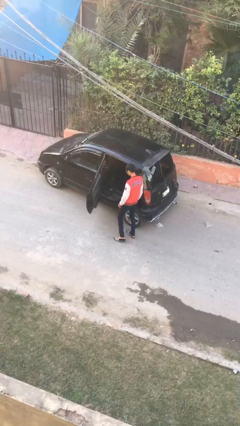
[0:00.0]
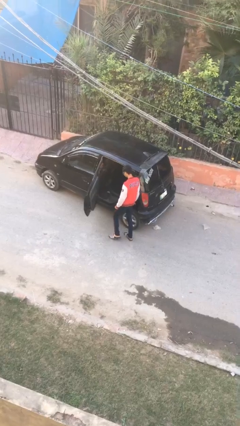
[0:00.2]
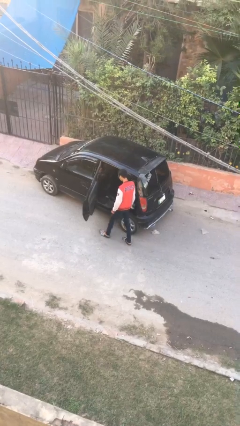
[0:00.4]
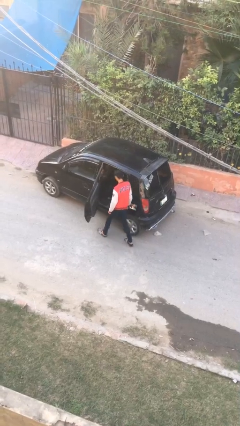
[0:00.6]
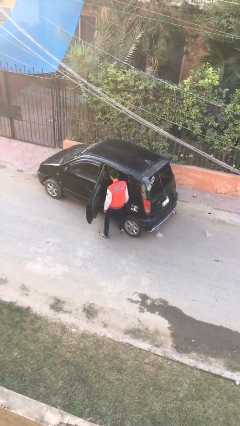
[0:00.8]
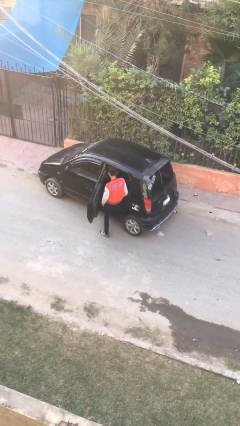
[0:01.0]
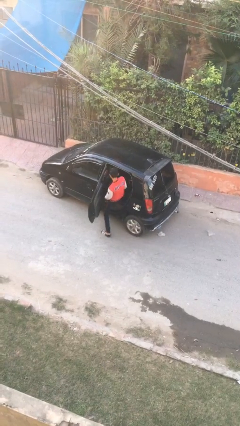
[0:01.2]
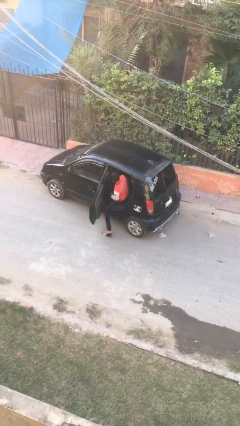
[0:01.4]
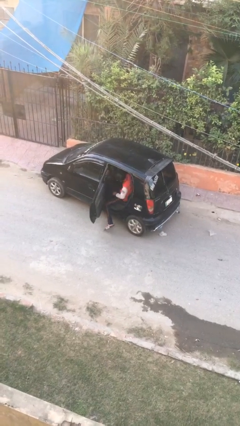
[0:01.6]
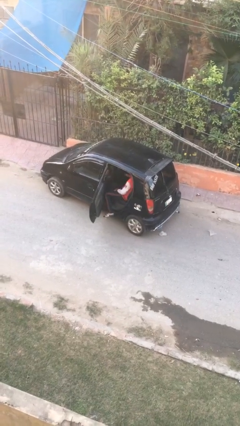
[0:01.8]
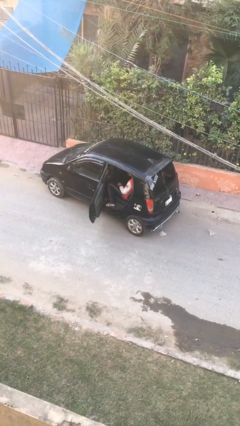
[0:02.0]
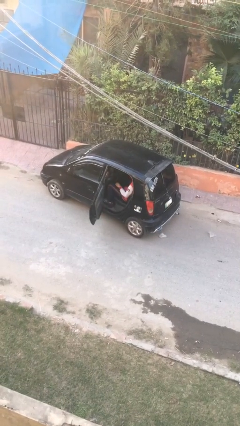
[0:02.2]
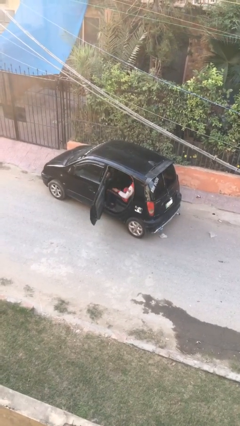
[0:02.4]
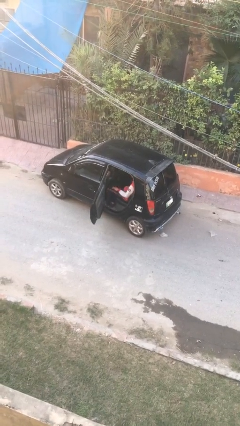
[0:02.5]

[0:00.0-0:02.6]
person enters car

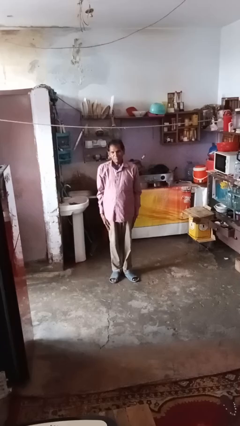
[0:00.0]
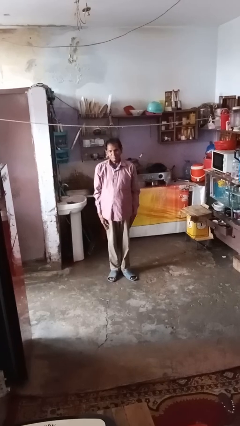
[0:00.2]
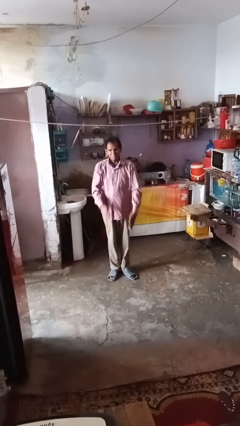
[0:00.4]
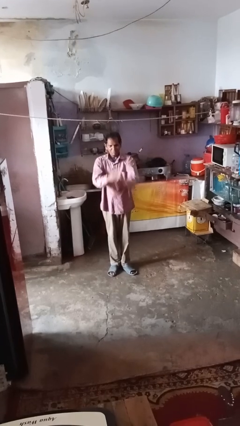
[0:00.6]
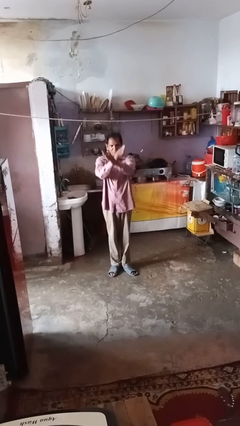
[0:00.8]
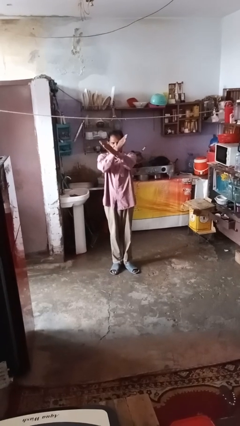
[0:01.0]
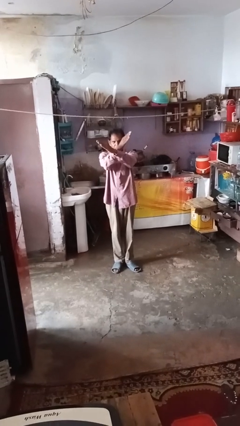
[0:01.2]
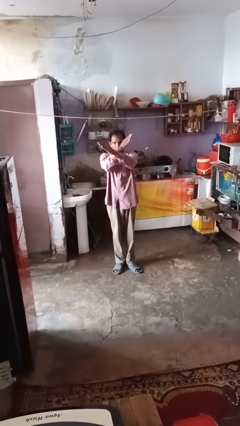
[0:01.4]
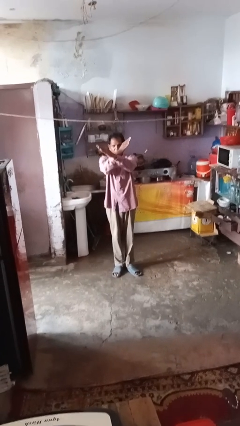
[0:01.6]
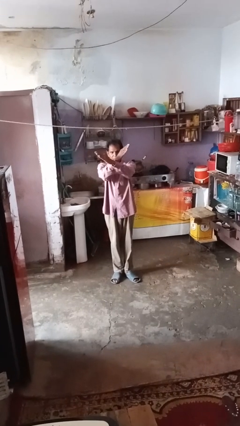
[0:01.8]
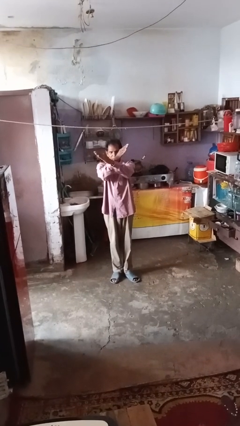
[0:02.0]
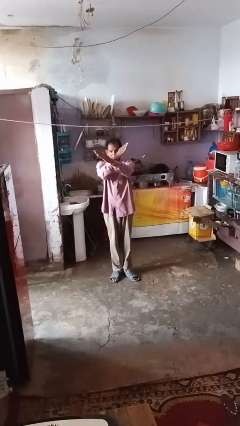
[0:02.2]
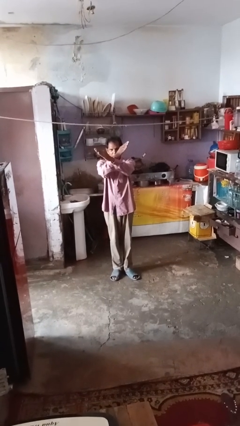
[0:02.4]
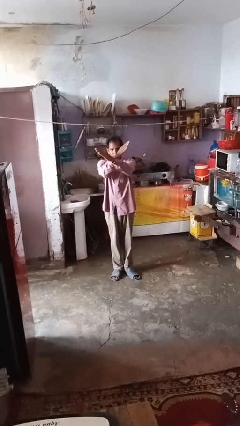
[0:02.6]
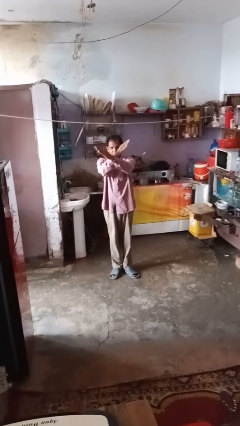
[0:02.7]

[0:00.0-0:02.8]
person gestures arms x

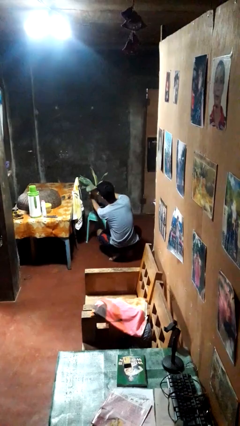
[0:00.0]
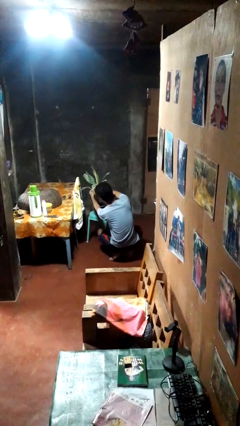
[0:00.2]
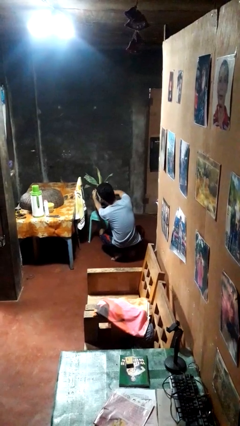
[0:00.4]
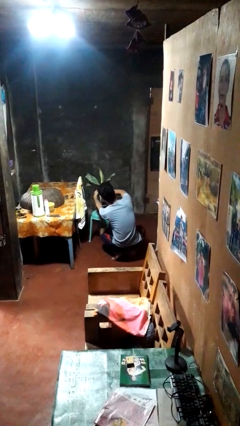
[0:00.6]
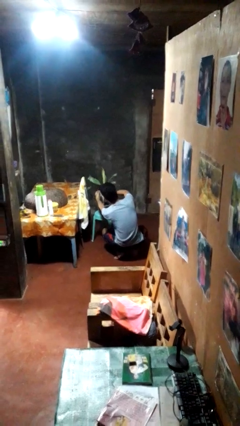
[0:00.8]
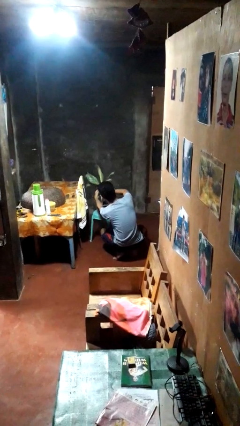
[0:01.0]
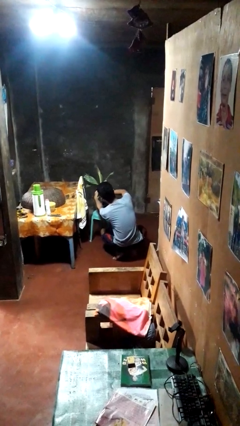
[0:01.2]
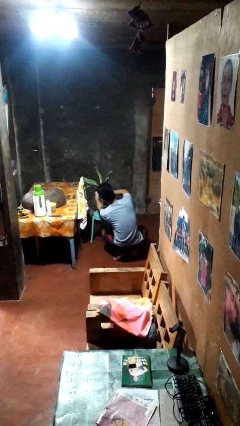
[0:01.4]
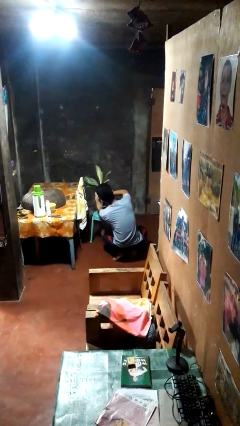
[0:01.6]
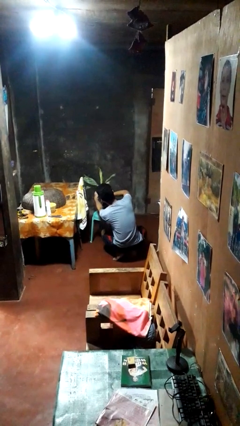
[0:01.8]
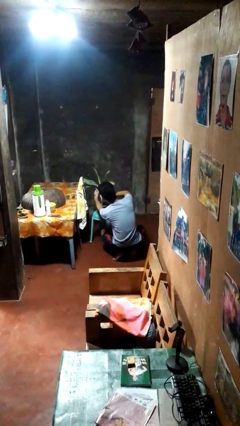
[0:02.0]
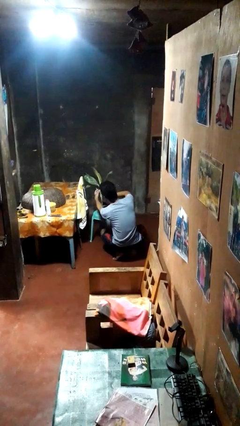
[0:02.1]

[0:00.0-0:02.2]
person arranges flowers in vase

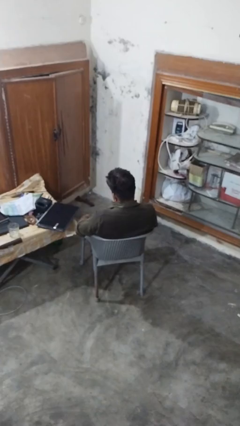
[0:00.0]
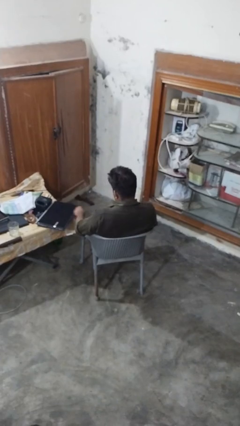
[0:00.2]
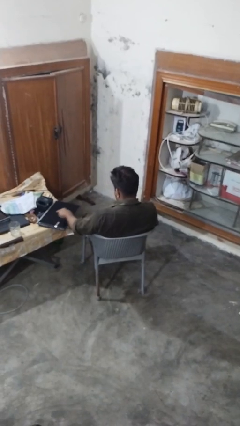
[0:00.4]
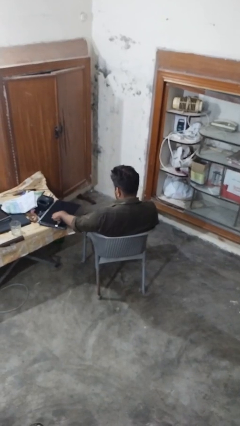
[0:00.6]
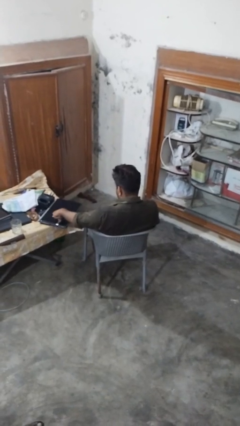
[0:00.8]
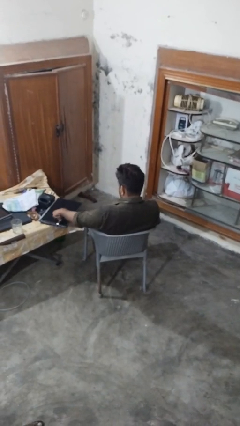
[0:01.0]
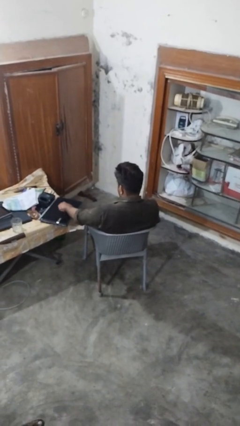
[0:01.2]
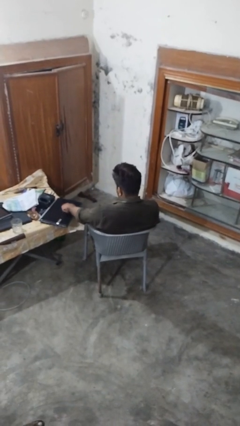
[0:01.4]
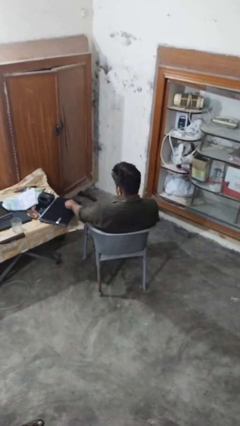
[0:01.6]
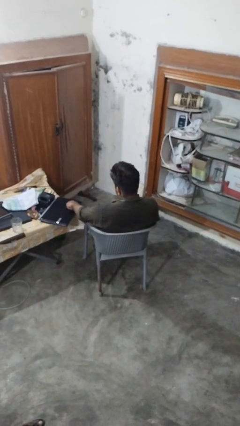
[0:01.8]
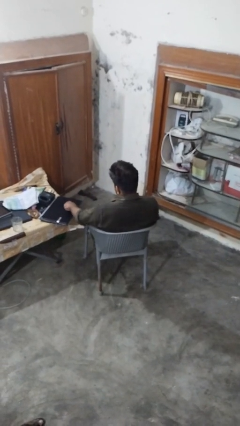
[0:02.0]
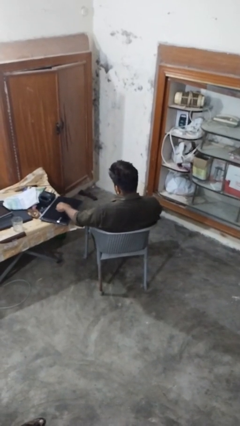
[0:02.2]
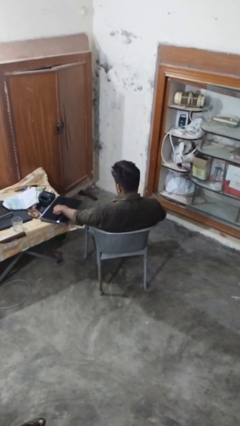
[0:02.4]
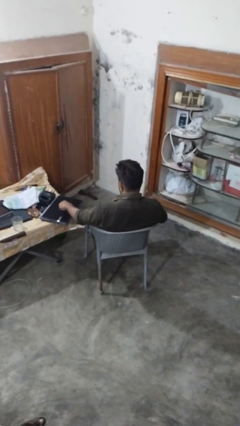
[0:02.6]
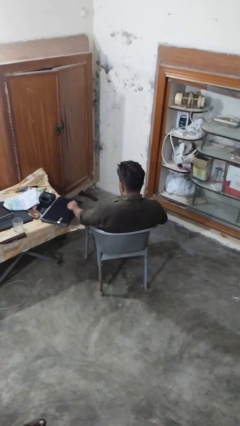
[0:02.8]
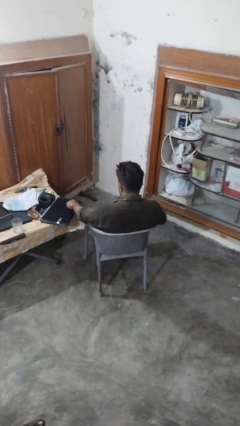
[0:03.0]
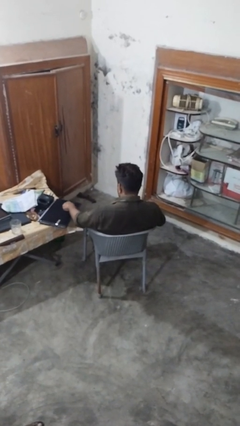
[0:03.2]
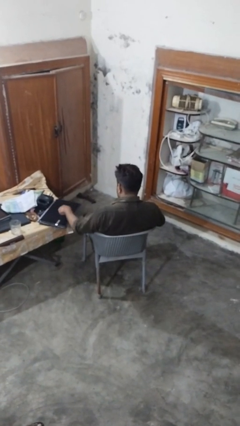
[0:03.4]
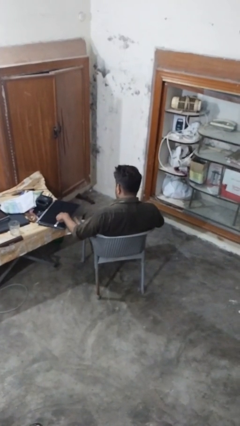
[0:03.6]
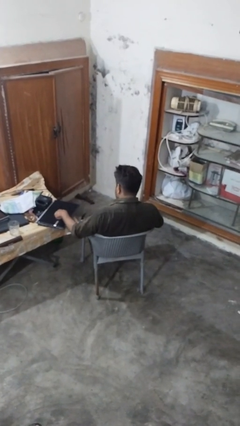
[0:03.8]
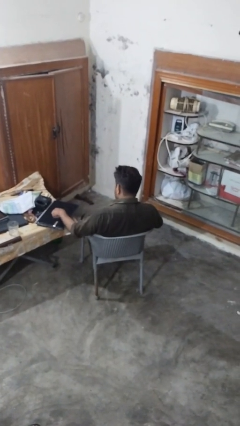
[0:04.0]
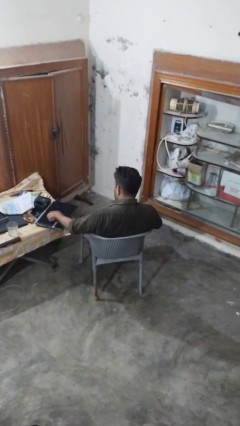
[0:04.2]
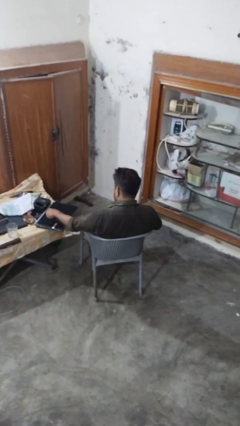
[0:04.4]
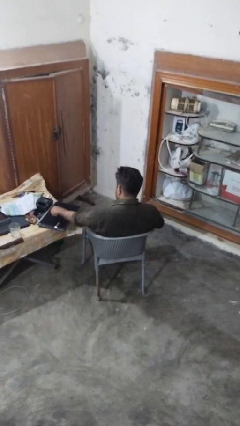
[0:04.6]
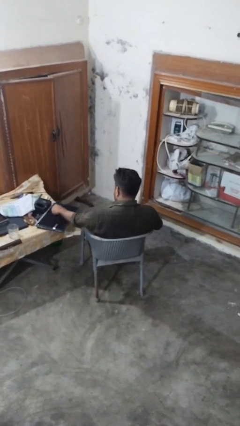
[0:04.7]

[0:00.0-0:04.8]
person taps object with finger

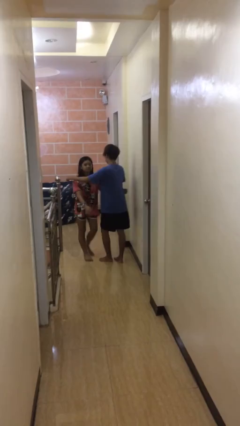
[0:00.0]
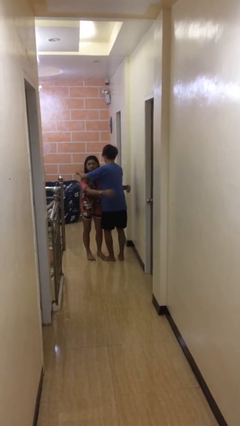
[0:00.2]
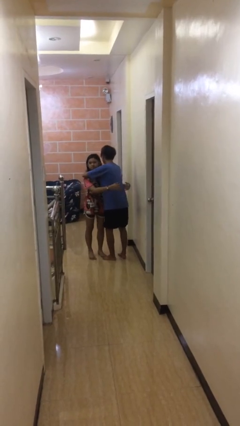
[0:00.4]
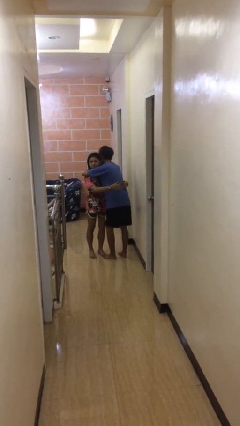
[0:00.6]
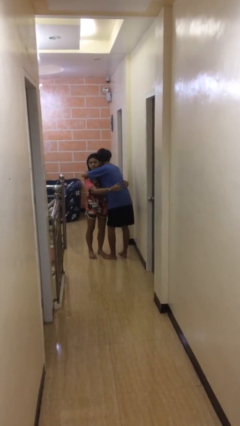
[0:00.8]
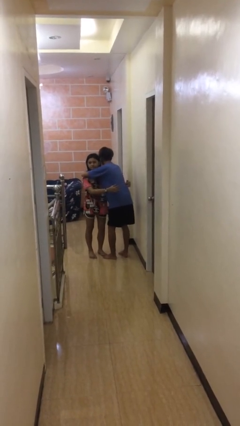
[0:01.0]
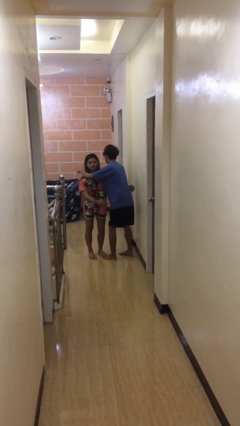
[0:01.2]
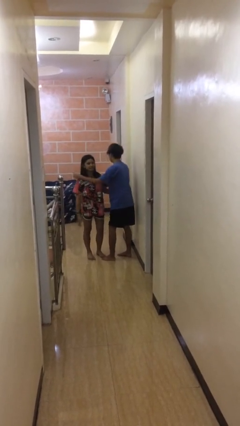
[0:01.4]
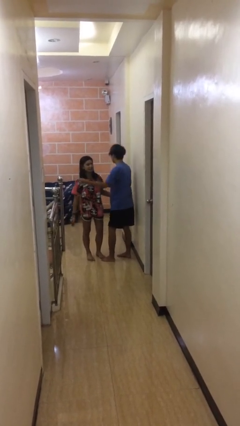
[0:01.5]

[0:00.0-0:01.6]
person embraces person

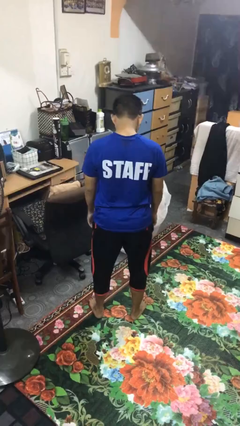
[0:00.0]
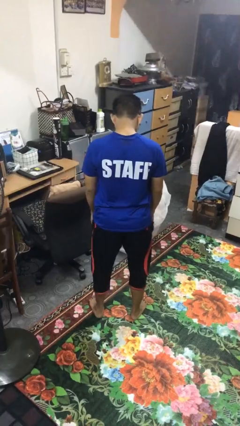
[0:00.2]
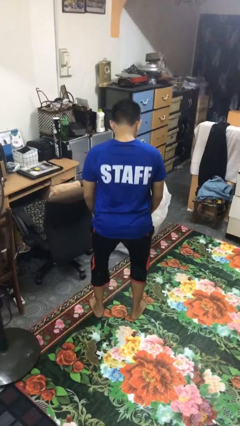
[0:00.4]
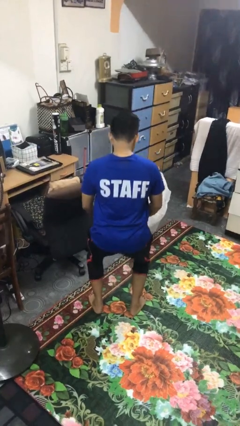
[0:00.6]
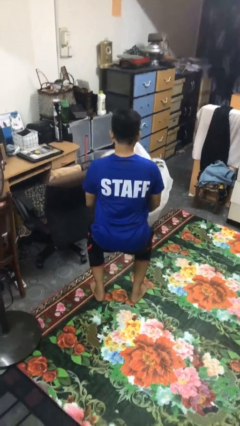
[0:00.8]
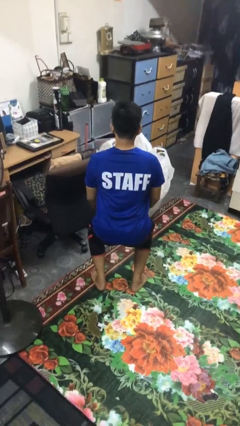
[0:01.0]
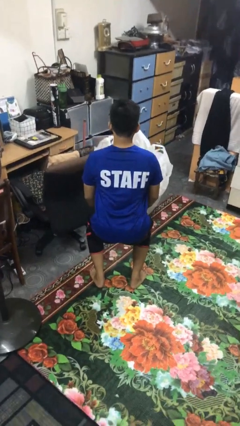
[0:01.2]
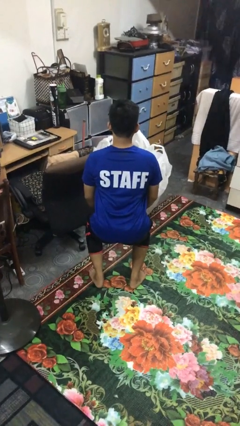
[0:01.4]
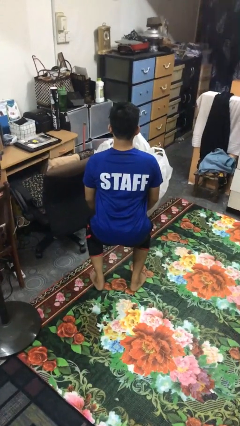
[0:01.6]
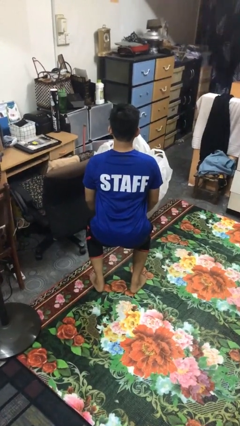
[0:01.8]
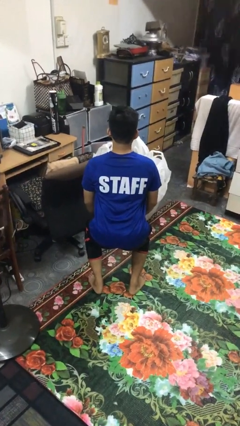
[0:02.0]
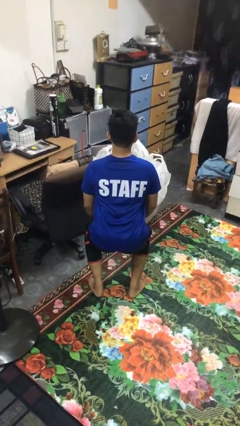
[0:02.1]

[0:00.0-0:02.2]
person squats

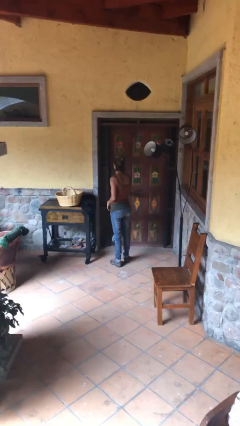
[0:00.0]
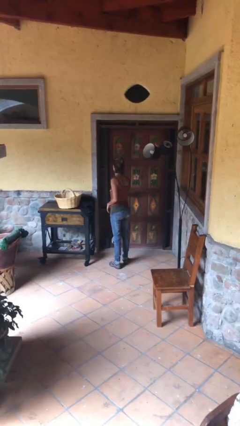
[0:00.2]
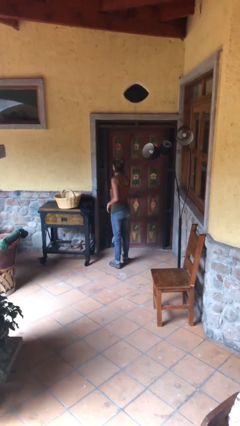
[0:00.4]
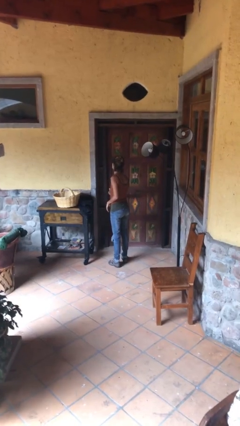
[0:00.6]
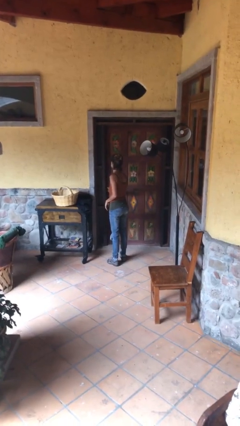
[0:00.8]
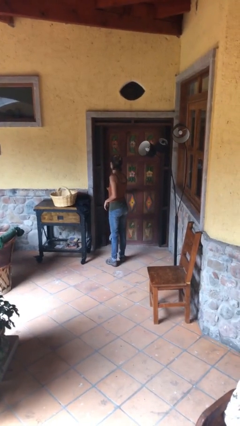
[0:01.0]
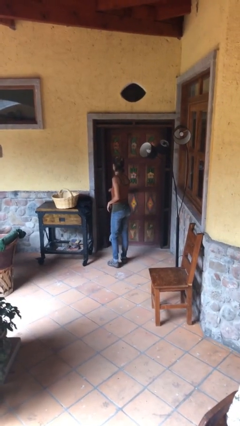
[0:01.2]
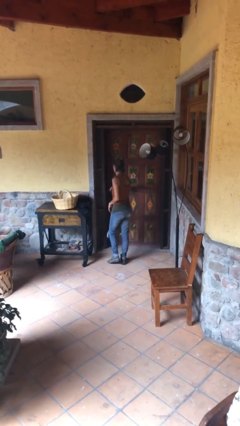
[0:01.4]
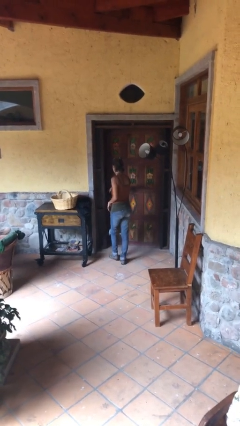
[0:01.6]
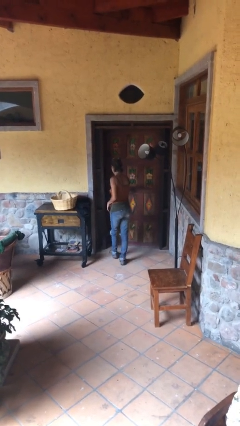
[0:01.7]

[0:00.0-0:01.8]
person opens facility door
